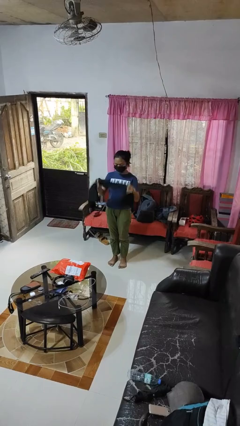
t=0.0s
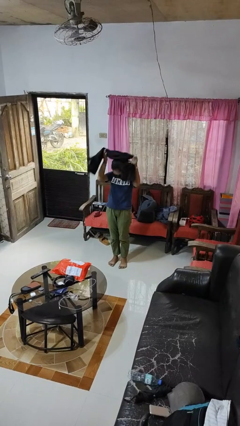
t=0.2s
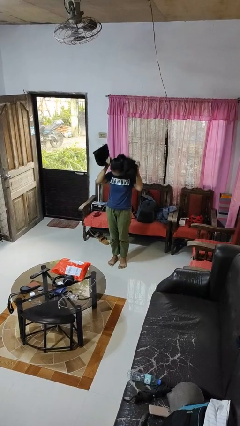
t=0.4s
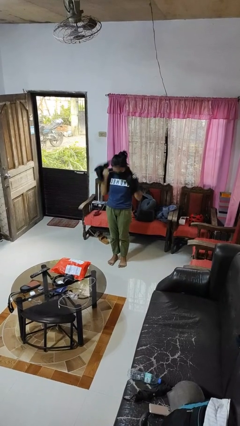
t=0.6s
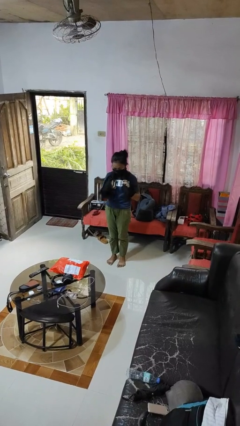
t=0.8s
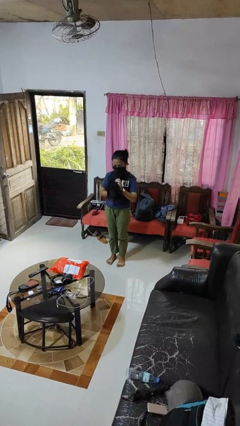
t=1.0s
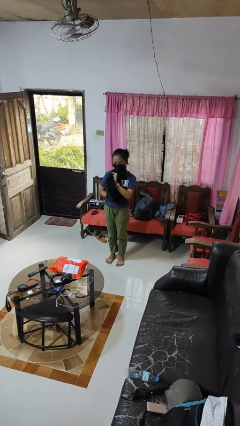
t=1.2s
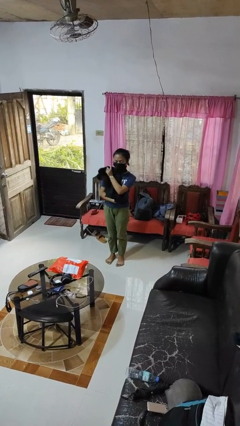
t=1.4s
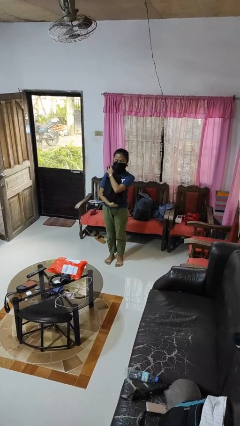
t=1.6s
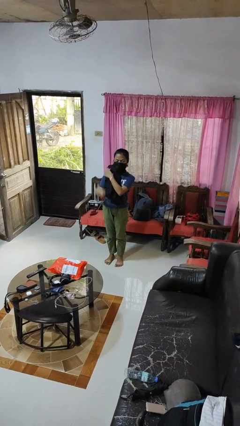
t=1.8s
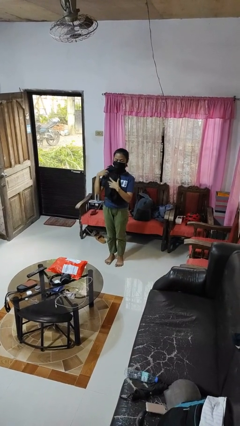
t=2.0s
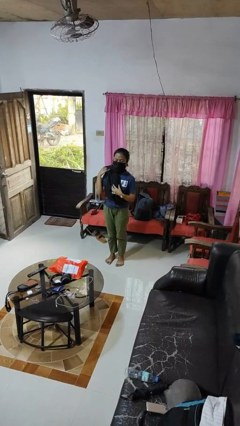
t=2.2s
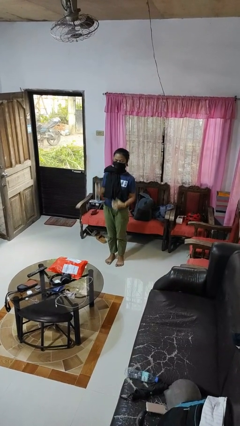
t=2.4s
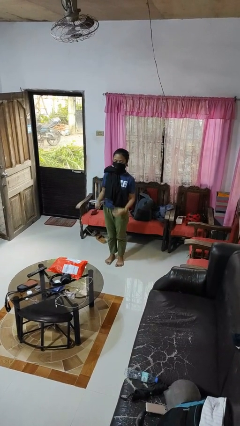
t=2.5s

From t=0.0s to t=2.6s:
person puts on scarf

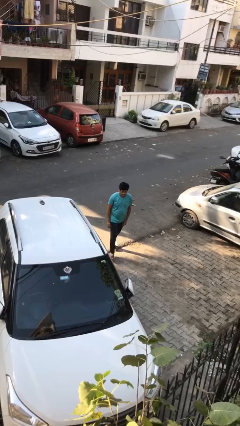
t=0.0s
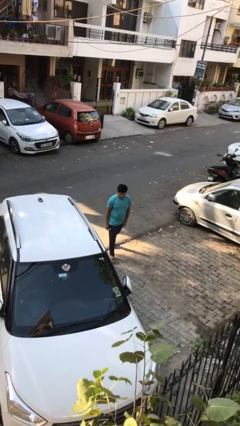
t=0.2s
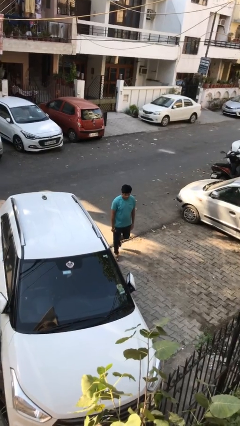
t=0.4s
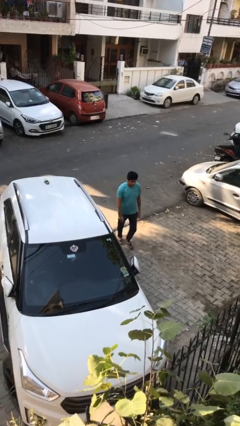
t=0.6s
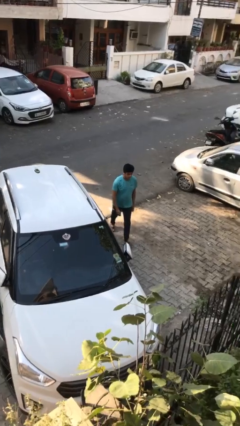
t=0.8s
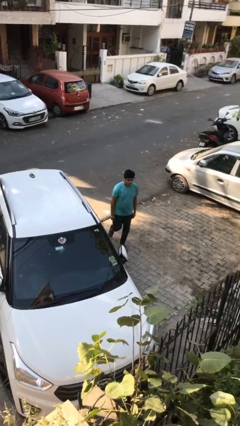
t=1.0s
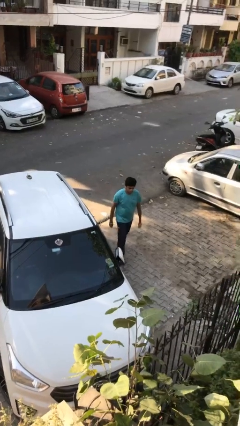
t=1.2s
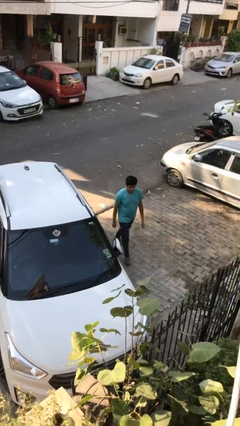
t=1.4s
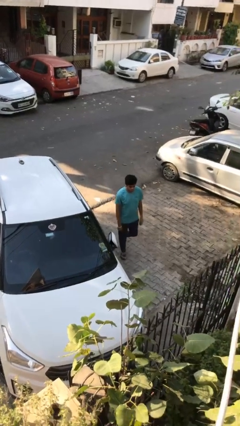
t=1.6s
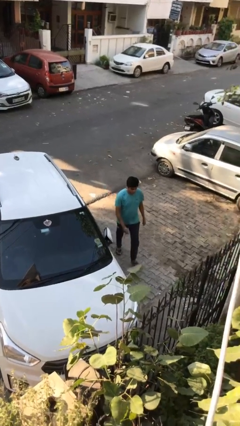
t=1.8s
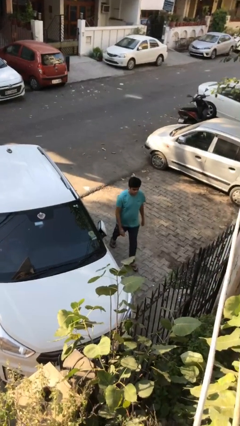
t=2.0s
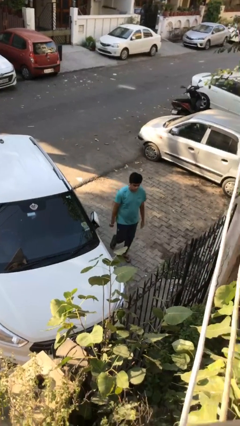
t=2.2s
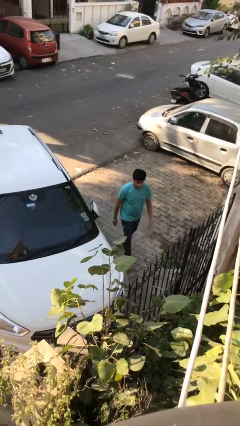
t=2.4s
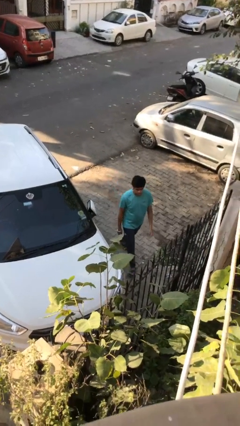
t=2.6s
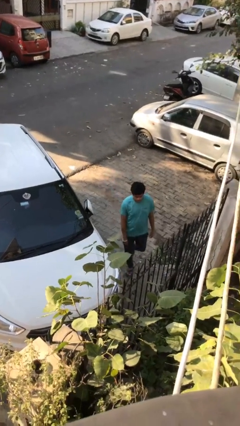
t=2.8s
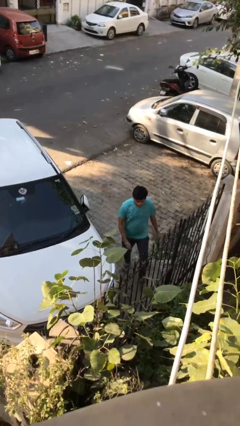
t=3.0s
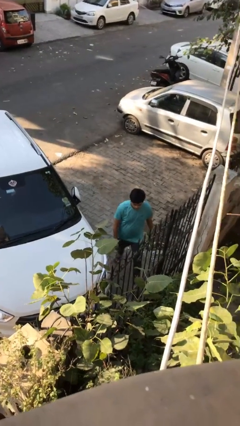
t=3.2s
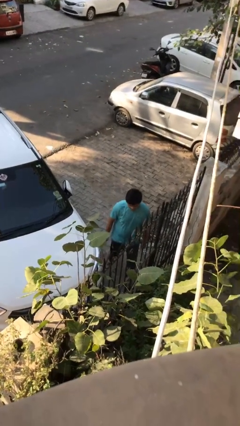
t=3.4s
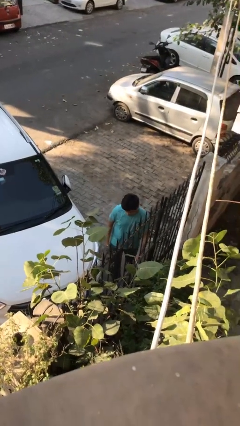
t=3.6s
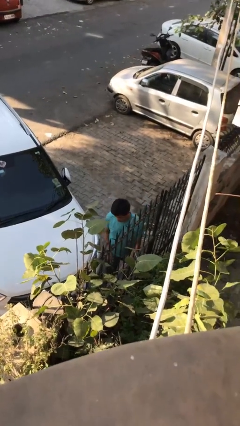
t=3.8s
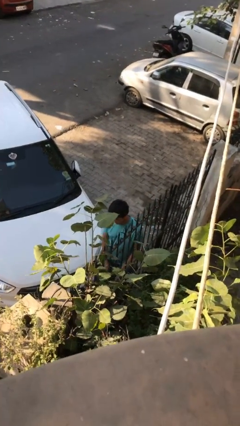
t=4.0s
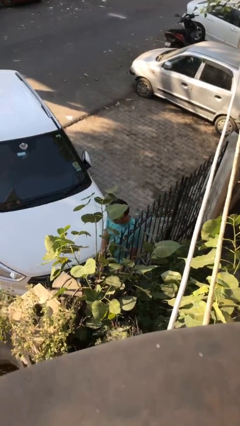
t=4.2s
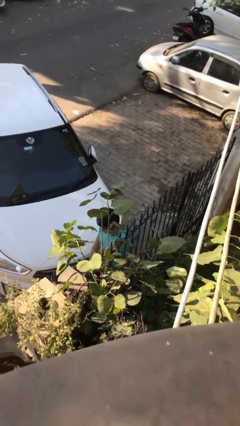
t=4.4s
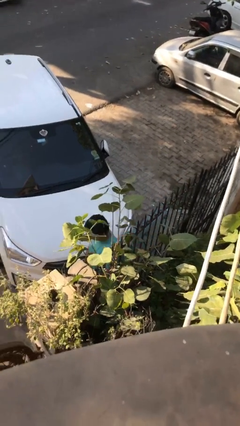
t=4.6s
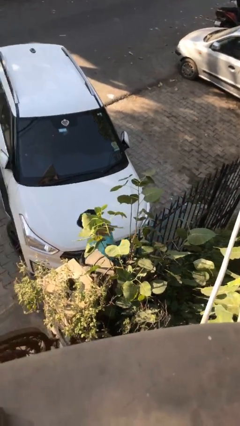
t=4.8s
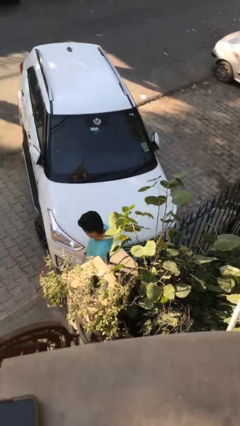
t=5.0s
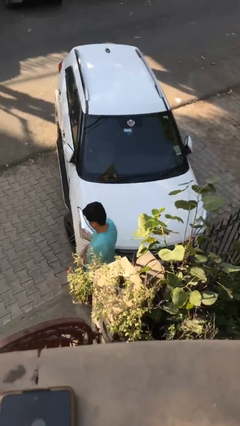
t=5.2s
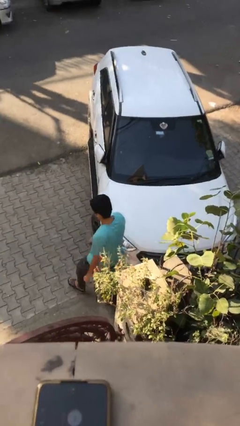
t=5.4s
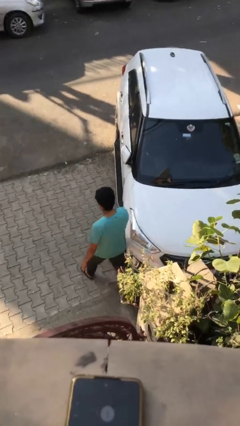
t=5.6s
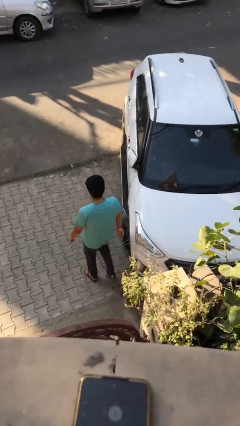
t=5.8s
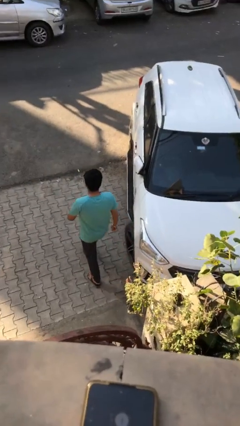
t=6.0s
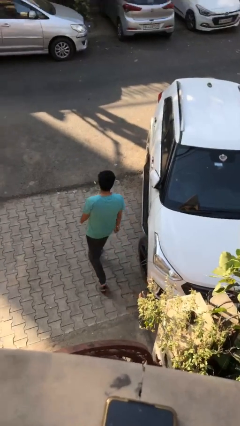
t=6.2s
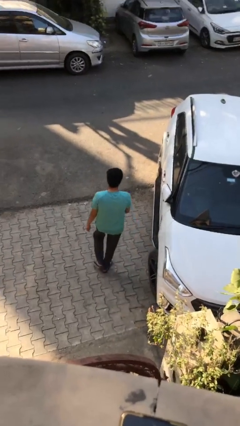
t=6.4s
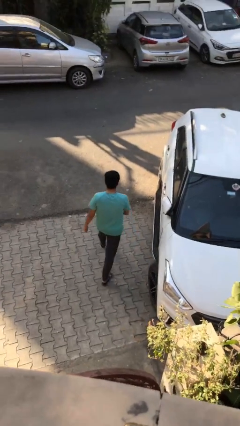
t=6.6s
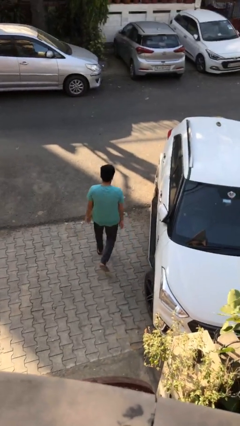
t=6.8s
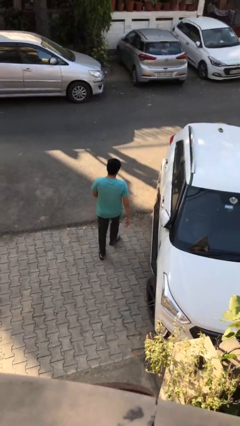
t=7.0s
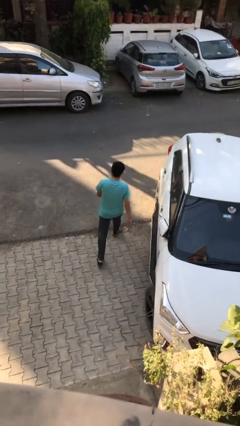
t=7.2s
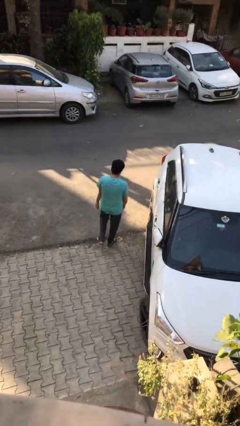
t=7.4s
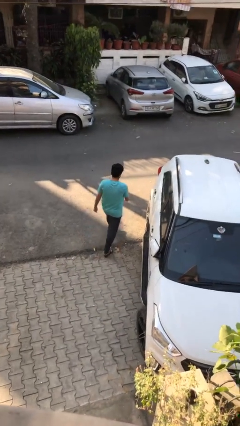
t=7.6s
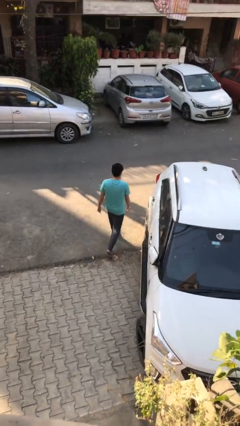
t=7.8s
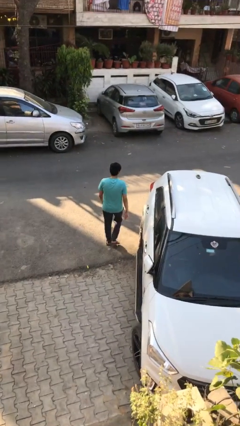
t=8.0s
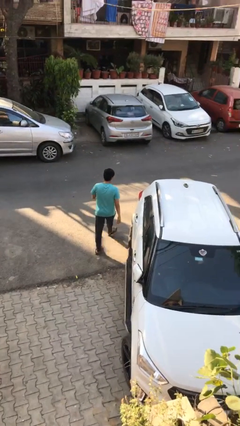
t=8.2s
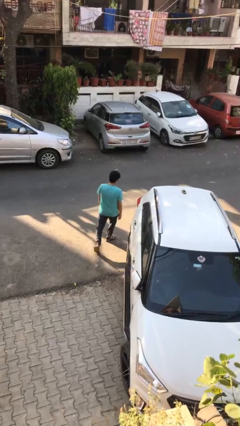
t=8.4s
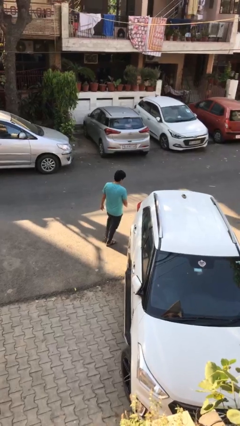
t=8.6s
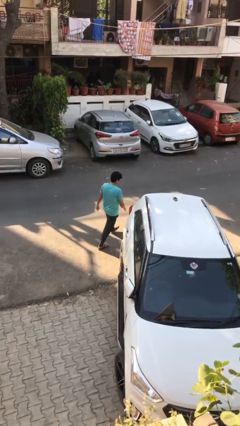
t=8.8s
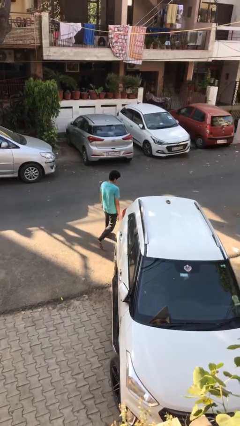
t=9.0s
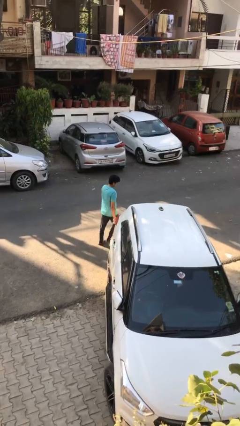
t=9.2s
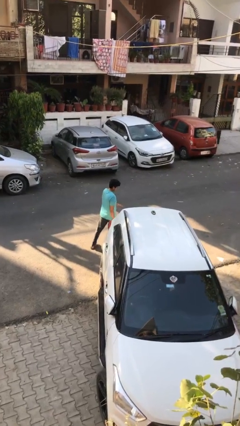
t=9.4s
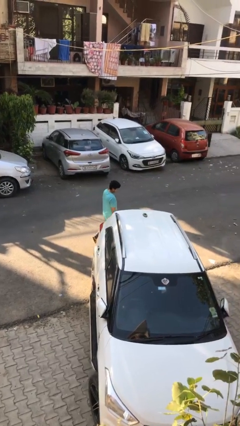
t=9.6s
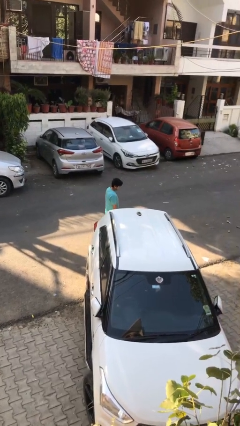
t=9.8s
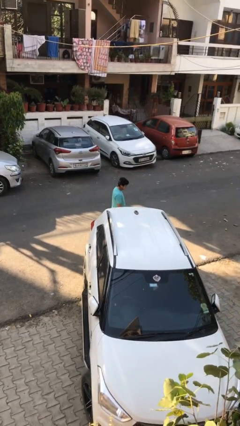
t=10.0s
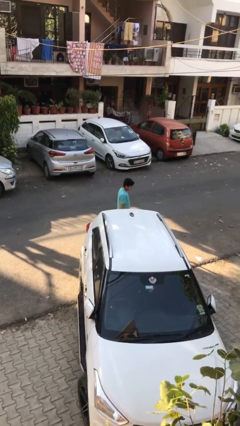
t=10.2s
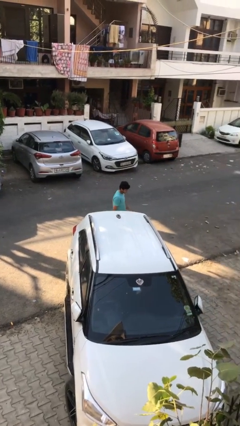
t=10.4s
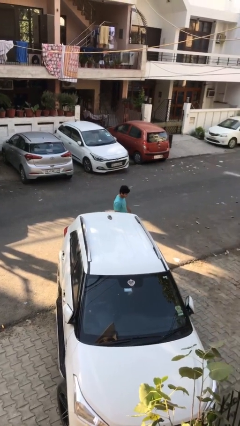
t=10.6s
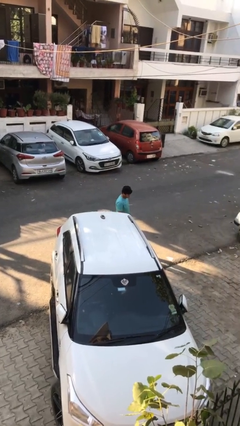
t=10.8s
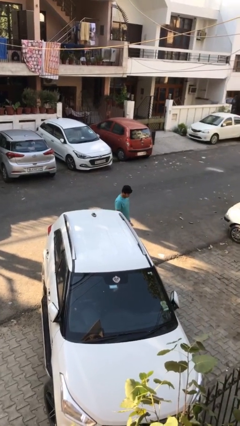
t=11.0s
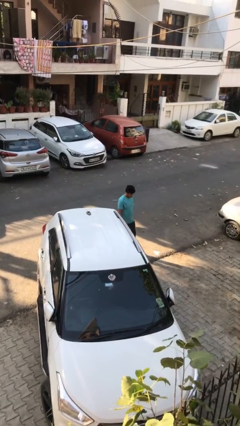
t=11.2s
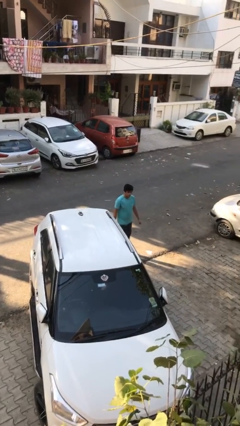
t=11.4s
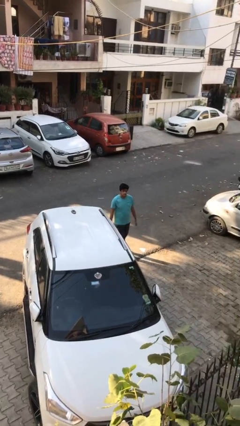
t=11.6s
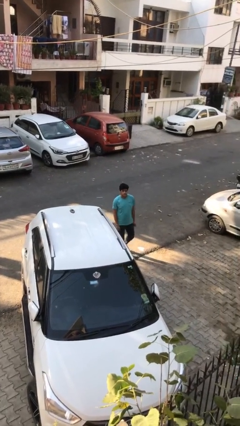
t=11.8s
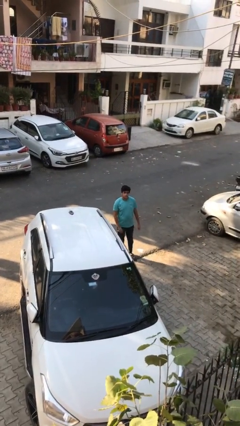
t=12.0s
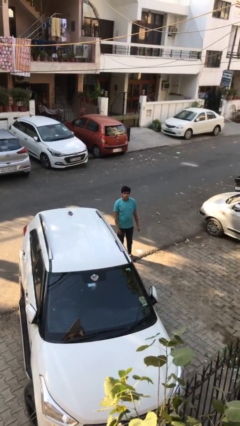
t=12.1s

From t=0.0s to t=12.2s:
person walks around car

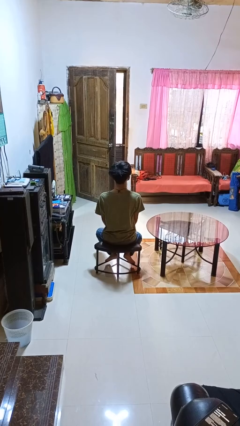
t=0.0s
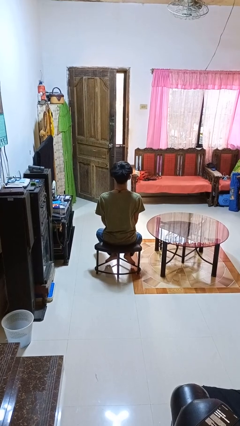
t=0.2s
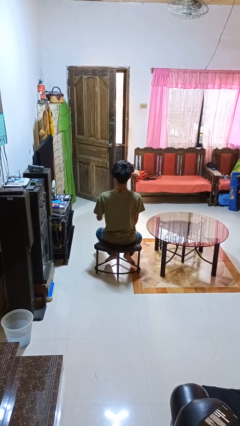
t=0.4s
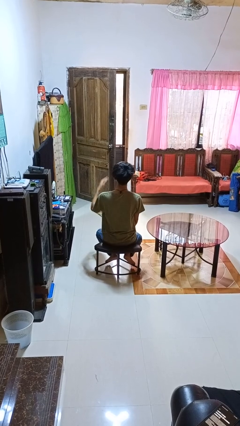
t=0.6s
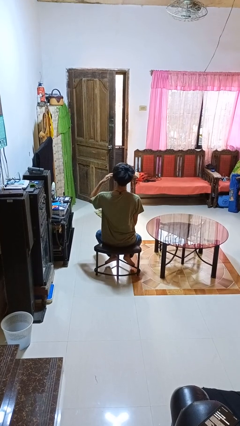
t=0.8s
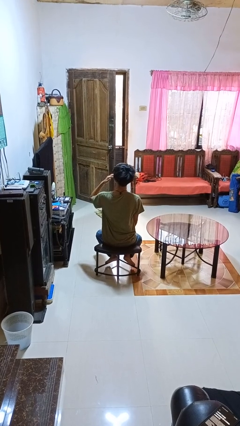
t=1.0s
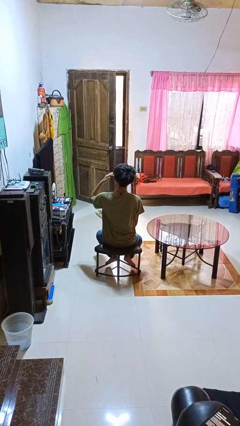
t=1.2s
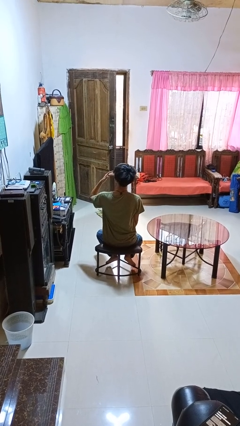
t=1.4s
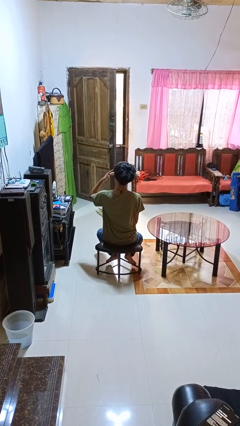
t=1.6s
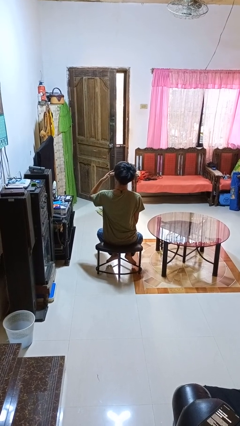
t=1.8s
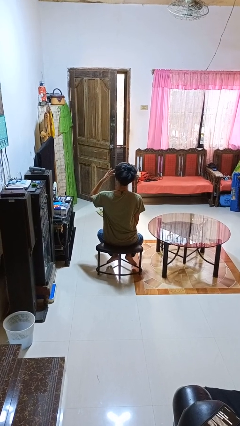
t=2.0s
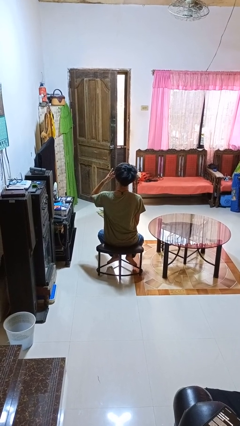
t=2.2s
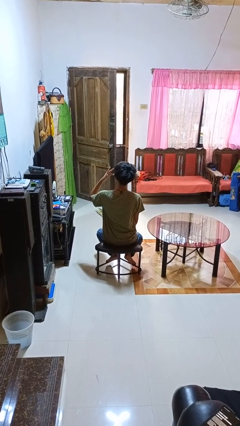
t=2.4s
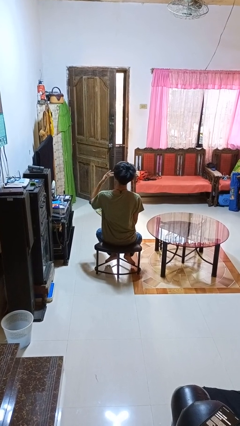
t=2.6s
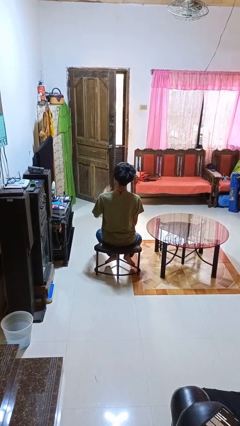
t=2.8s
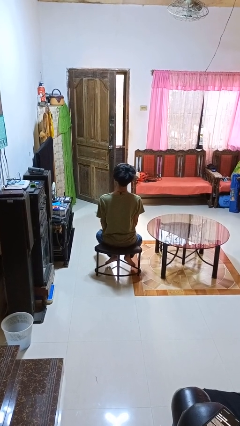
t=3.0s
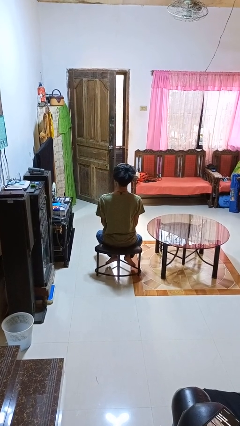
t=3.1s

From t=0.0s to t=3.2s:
person licks fingers
